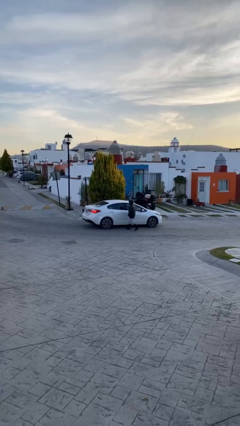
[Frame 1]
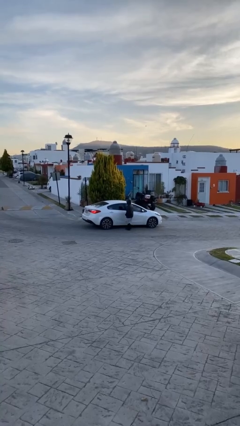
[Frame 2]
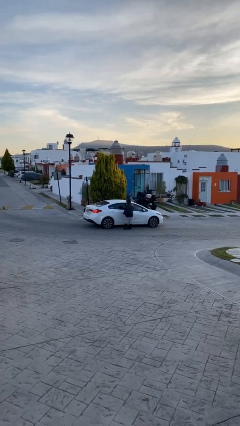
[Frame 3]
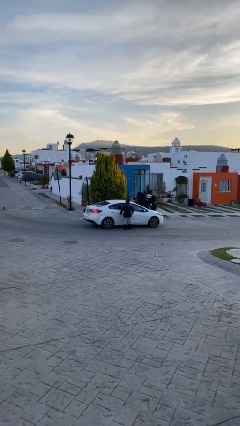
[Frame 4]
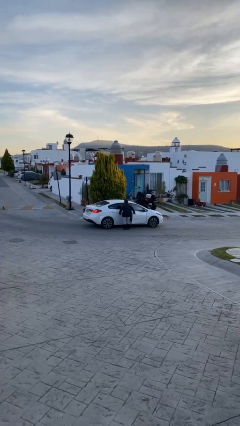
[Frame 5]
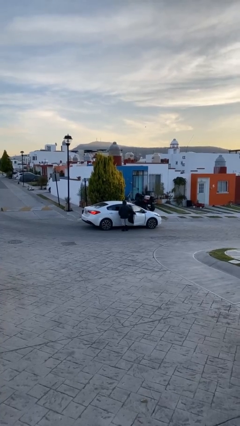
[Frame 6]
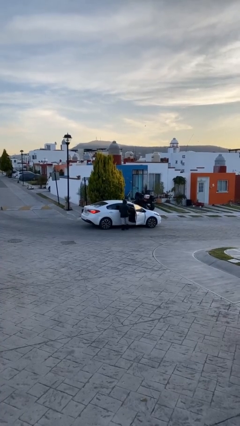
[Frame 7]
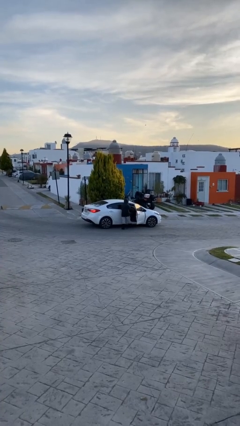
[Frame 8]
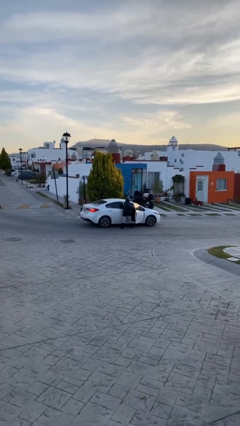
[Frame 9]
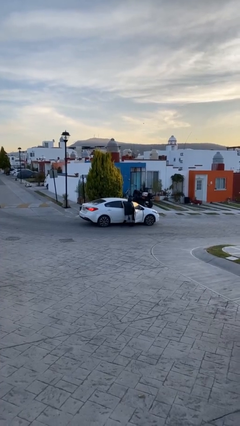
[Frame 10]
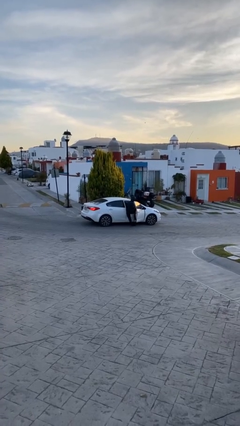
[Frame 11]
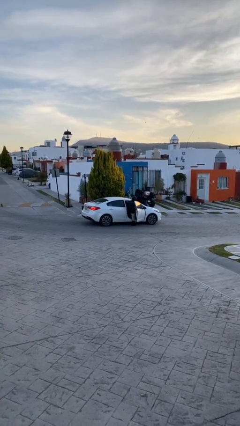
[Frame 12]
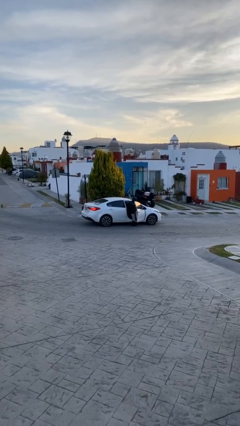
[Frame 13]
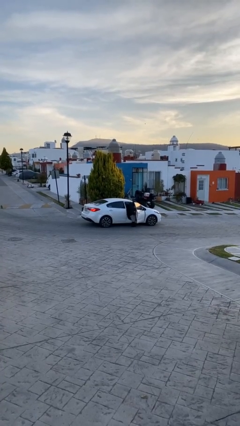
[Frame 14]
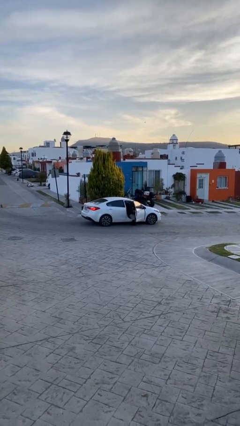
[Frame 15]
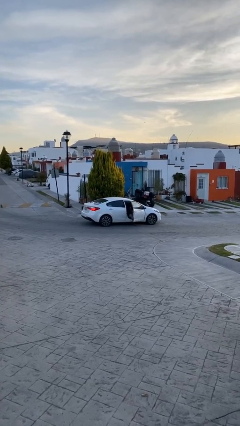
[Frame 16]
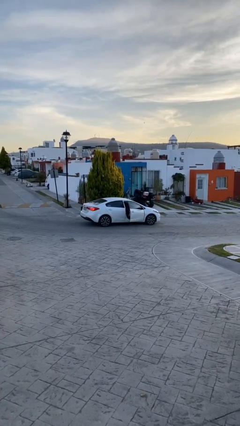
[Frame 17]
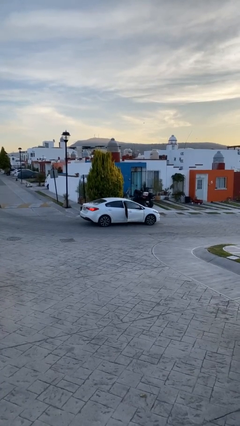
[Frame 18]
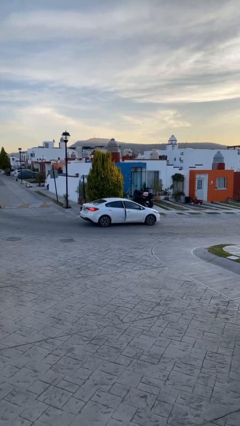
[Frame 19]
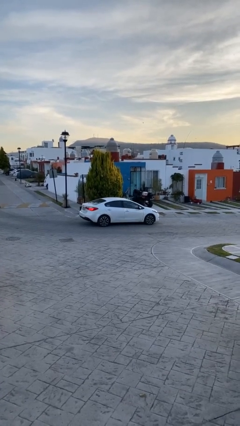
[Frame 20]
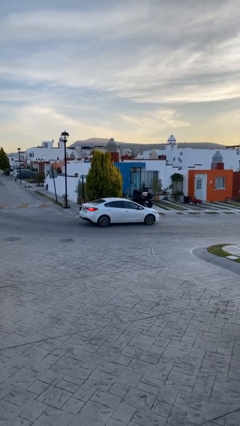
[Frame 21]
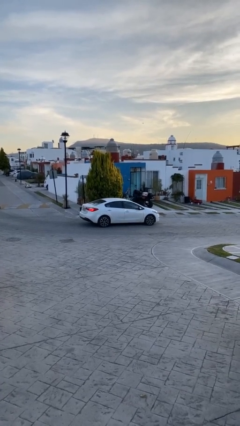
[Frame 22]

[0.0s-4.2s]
car picks up person

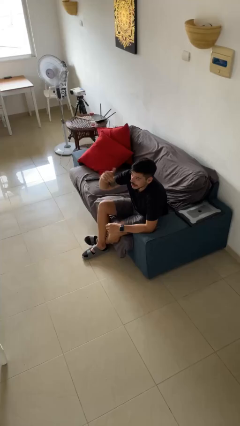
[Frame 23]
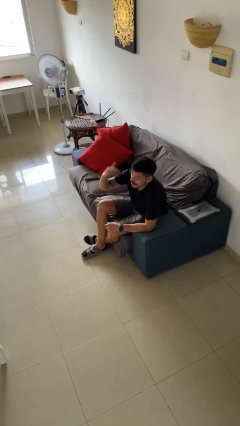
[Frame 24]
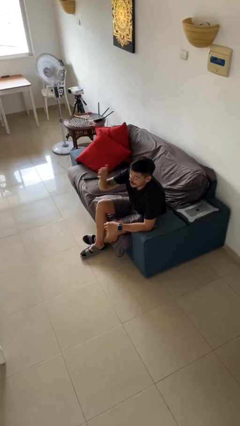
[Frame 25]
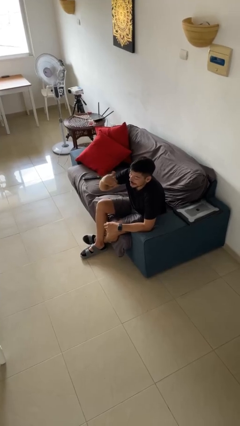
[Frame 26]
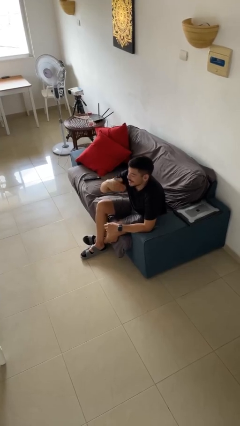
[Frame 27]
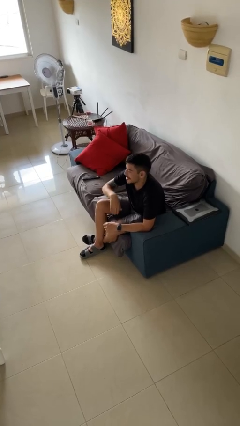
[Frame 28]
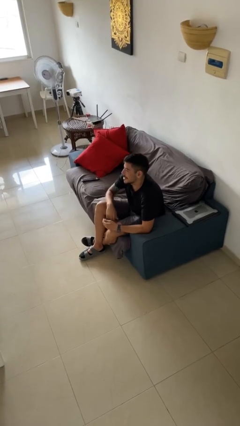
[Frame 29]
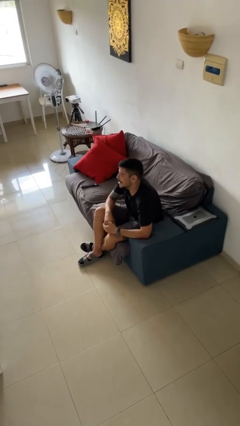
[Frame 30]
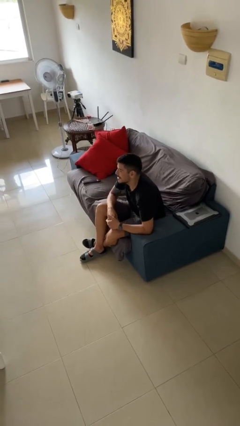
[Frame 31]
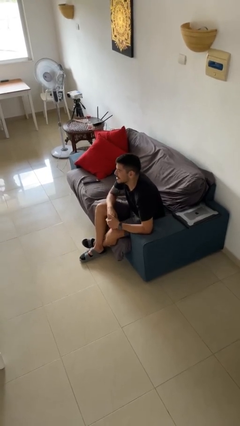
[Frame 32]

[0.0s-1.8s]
person gestures come here

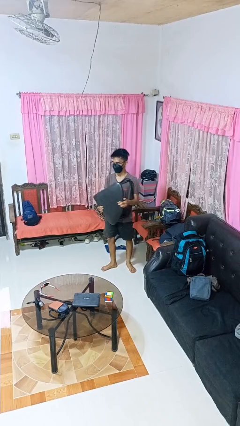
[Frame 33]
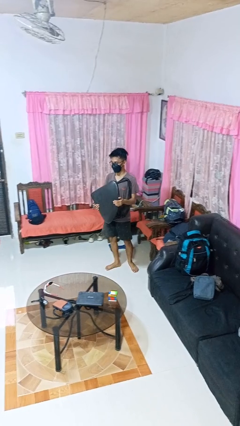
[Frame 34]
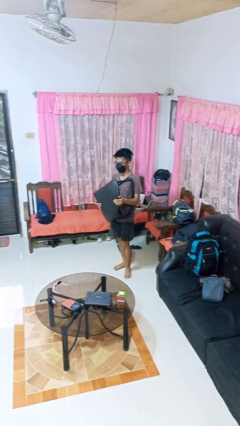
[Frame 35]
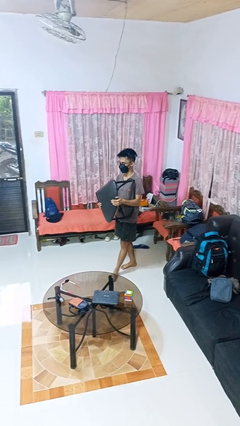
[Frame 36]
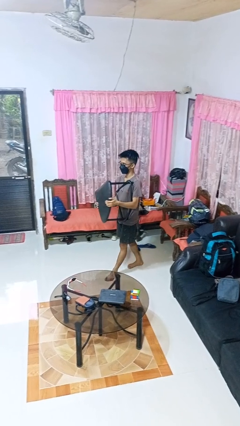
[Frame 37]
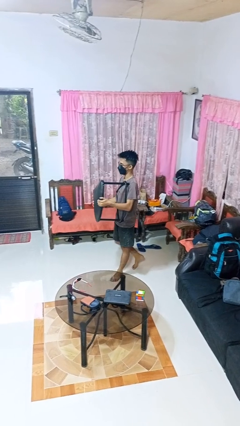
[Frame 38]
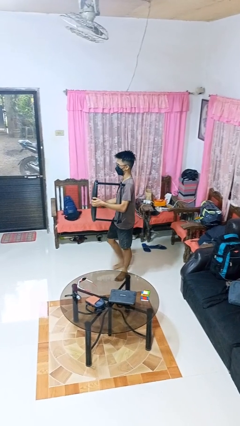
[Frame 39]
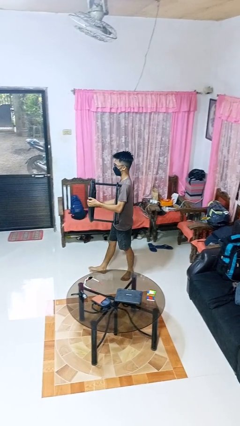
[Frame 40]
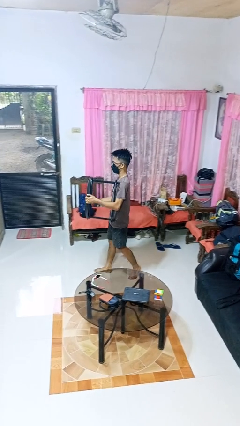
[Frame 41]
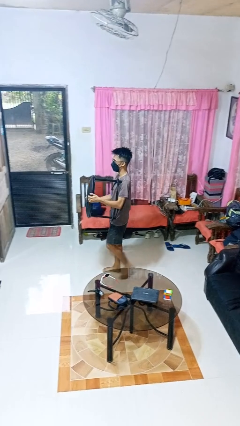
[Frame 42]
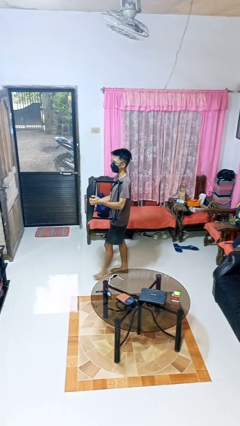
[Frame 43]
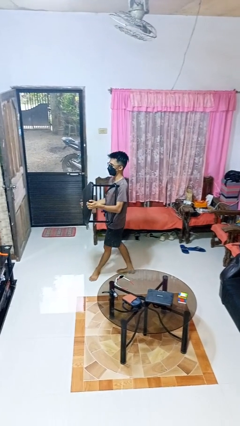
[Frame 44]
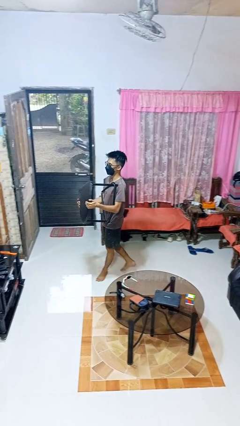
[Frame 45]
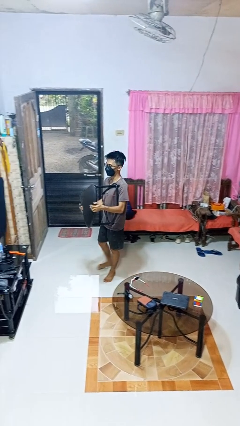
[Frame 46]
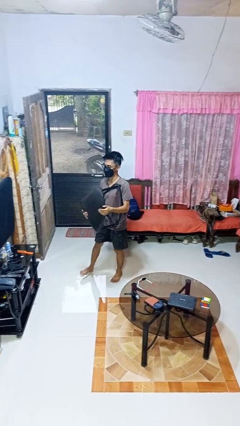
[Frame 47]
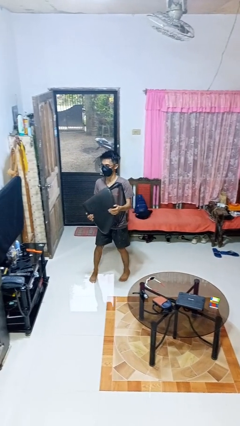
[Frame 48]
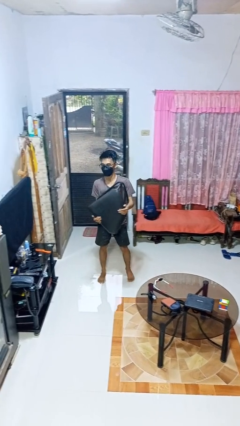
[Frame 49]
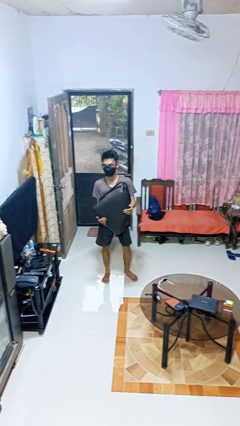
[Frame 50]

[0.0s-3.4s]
person carries furniture

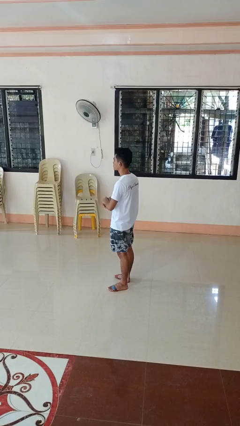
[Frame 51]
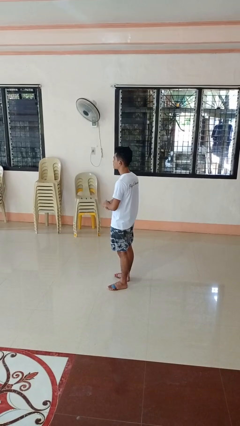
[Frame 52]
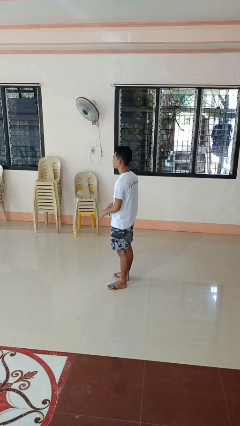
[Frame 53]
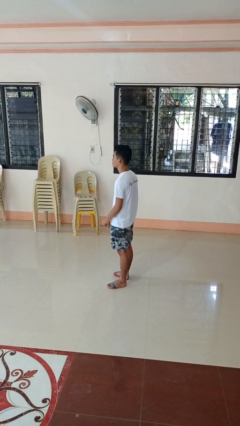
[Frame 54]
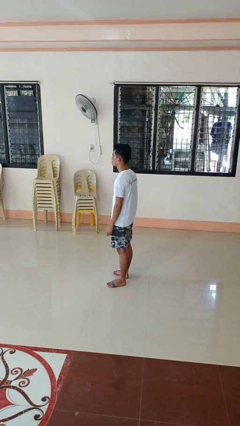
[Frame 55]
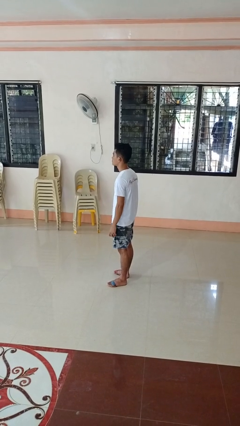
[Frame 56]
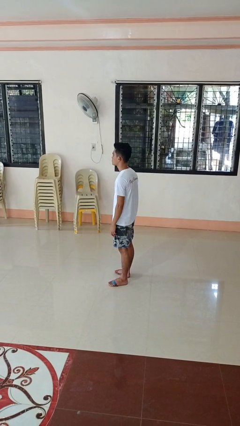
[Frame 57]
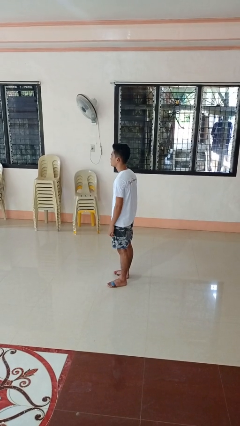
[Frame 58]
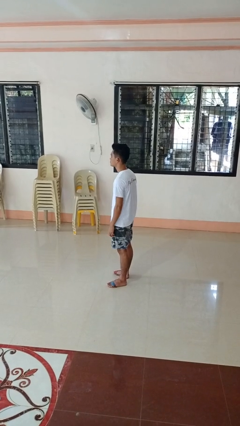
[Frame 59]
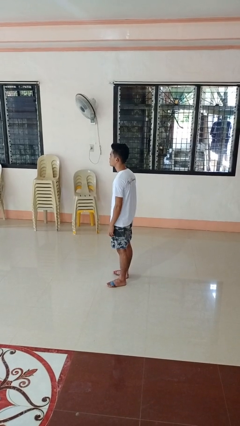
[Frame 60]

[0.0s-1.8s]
person takes off wristwatch

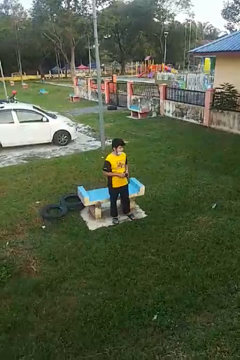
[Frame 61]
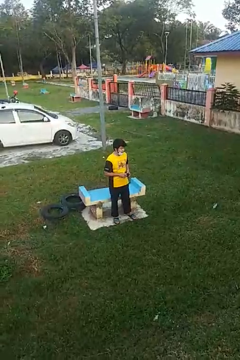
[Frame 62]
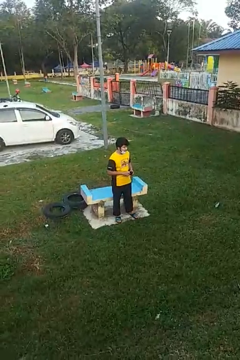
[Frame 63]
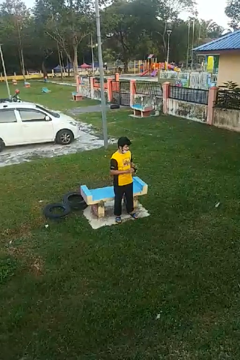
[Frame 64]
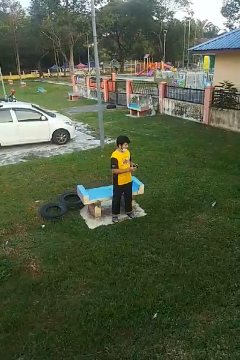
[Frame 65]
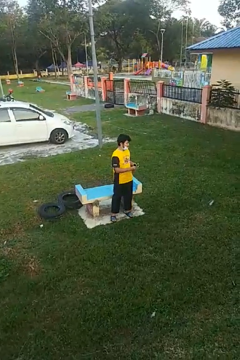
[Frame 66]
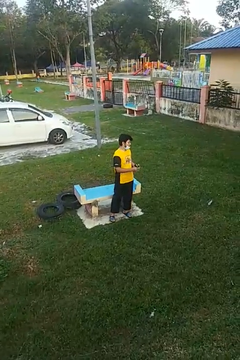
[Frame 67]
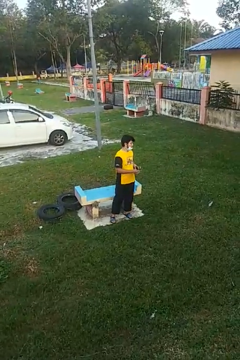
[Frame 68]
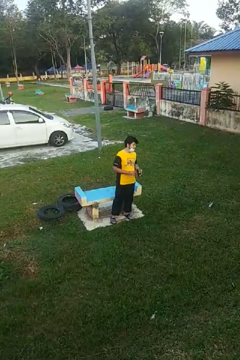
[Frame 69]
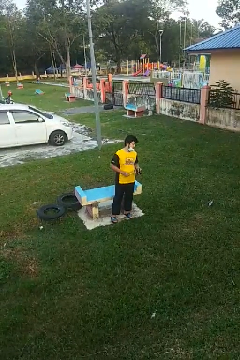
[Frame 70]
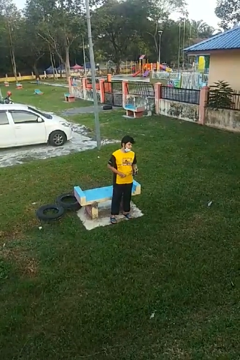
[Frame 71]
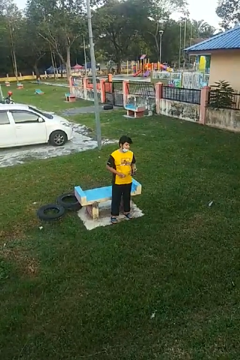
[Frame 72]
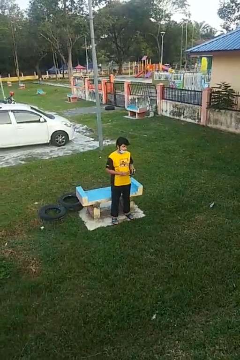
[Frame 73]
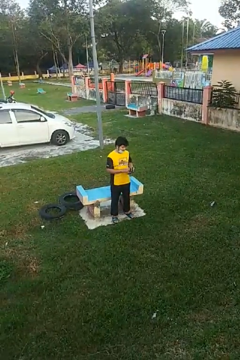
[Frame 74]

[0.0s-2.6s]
person searches in purse

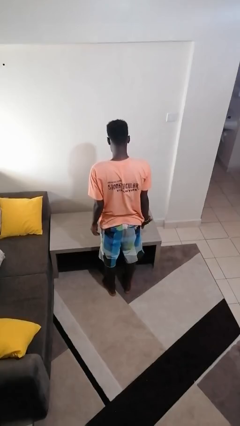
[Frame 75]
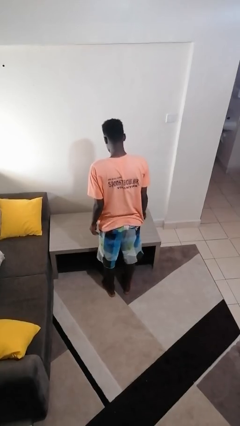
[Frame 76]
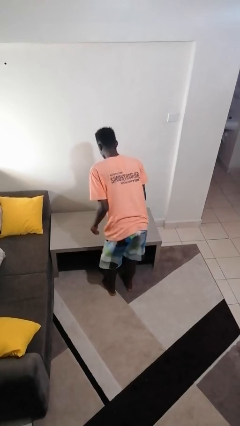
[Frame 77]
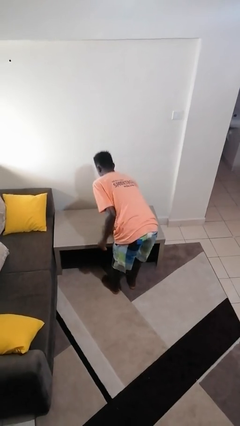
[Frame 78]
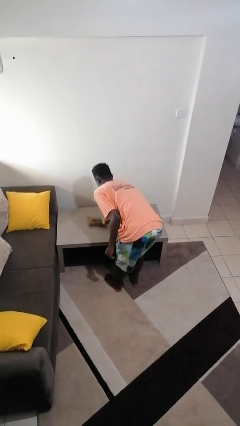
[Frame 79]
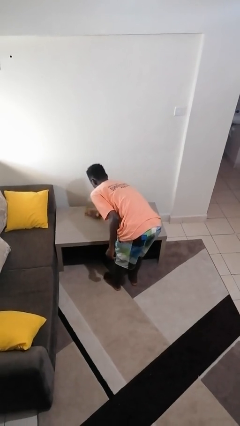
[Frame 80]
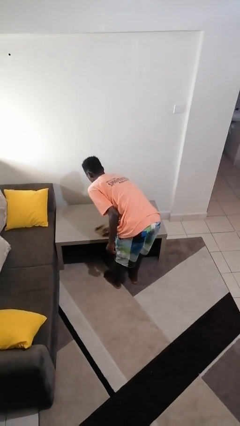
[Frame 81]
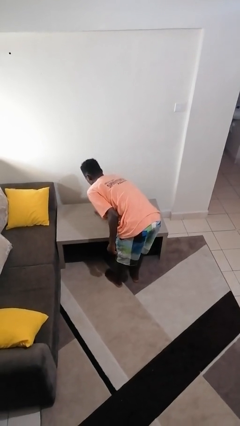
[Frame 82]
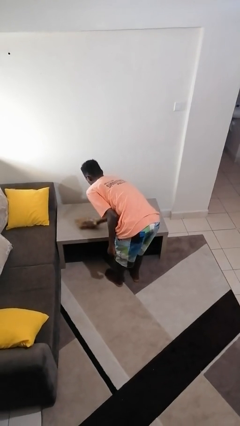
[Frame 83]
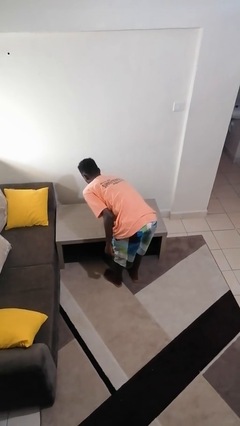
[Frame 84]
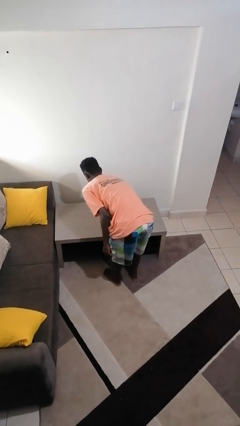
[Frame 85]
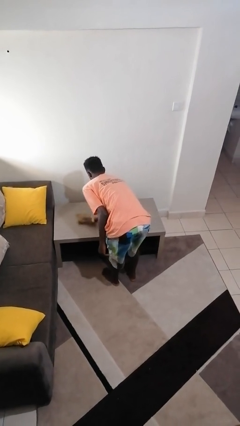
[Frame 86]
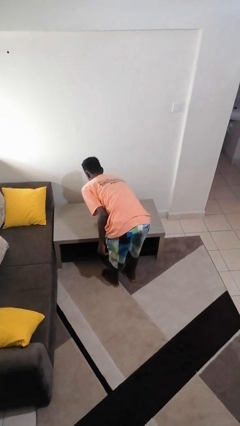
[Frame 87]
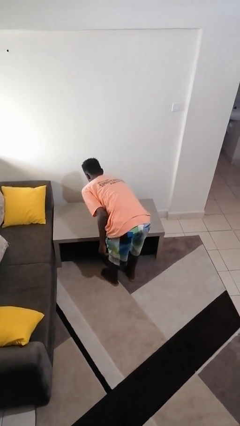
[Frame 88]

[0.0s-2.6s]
person cleans table with rag

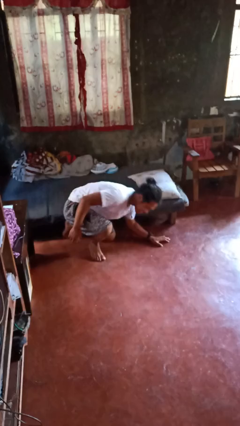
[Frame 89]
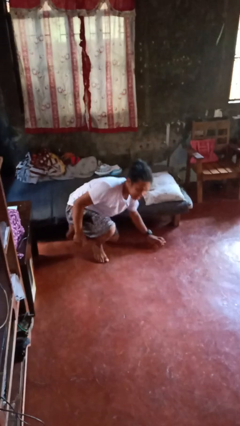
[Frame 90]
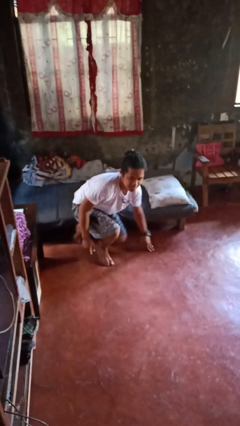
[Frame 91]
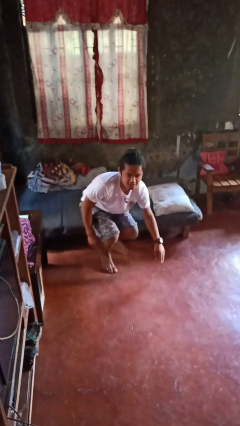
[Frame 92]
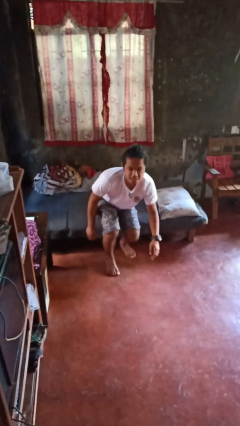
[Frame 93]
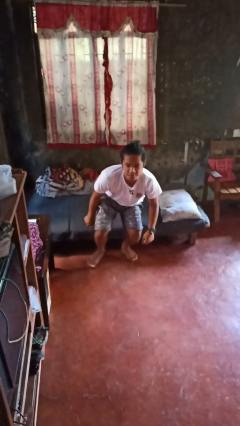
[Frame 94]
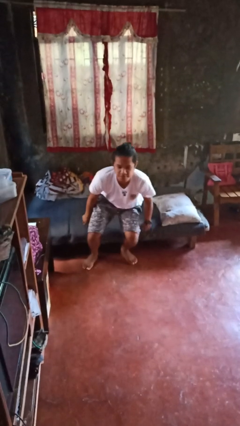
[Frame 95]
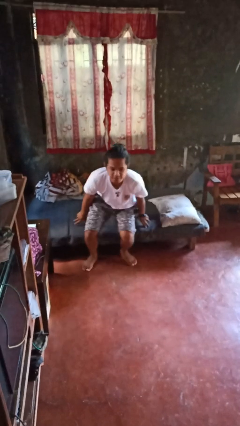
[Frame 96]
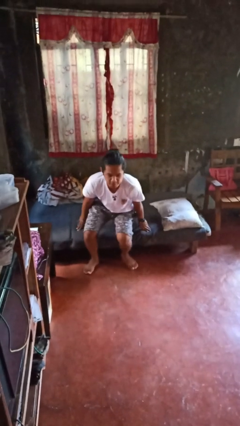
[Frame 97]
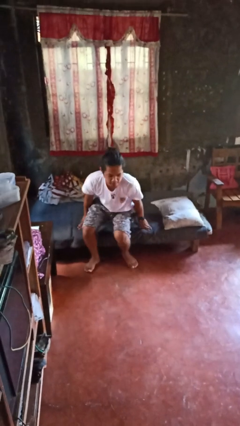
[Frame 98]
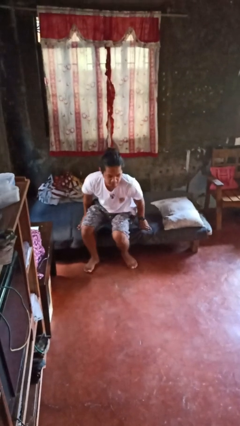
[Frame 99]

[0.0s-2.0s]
person stands up from floor
